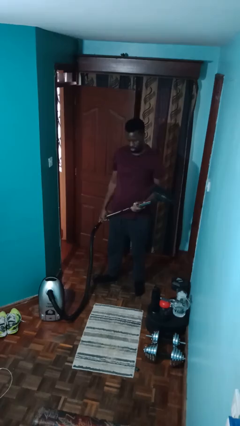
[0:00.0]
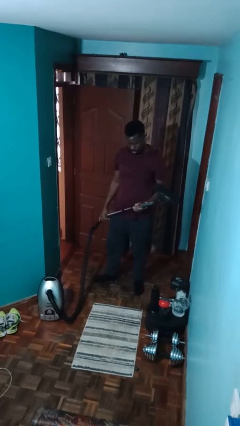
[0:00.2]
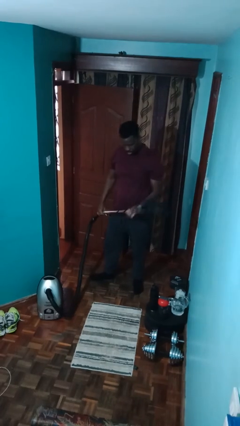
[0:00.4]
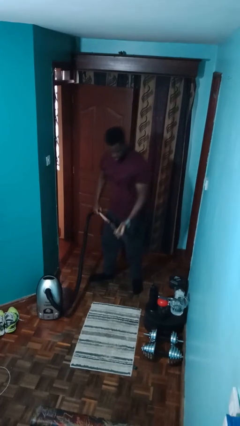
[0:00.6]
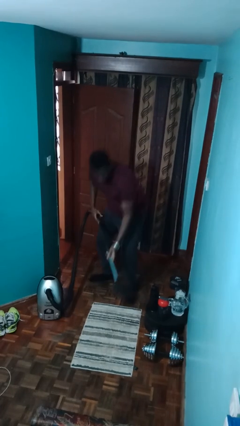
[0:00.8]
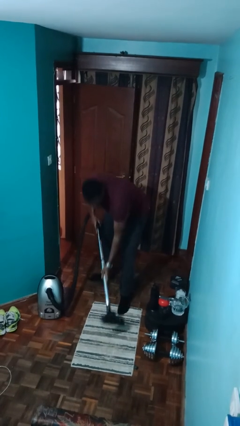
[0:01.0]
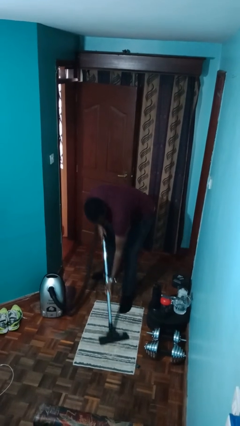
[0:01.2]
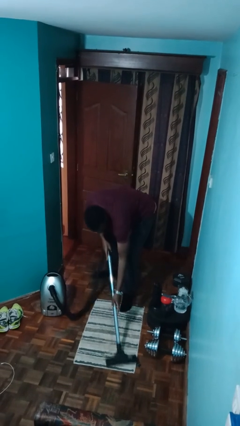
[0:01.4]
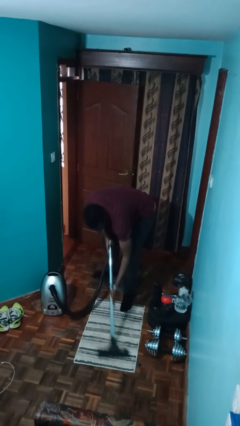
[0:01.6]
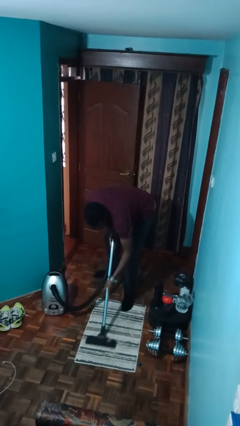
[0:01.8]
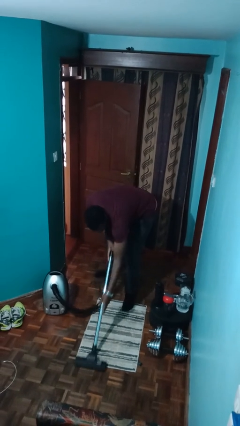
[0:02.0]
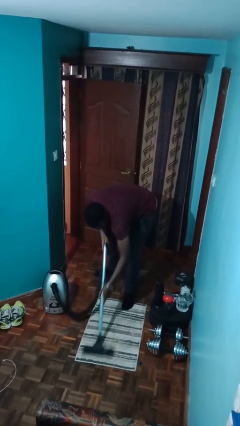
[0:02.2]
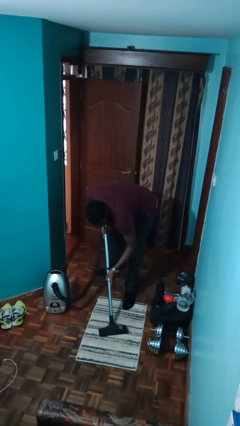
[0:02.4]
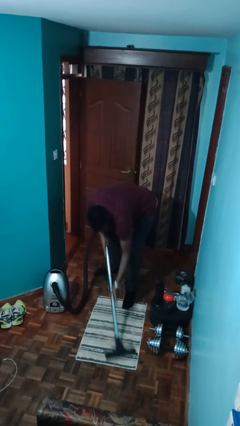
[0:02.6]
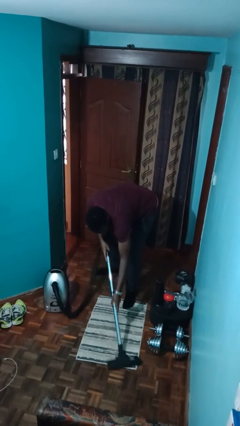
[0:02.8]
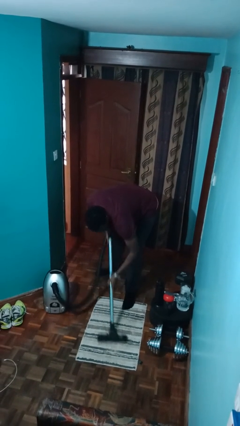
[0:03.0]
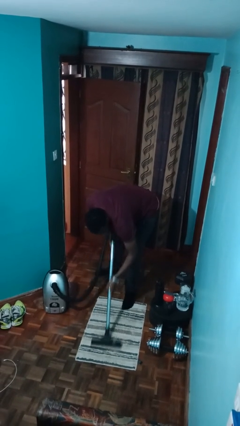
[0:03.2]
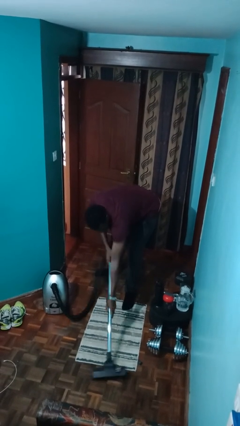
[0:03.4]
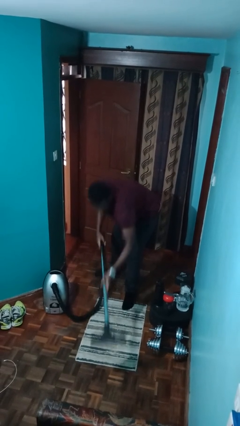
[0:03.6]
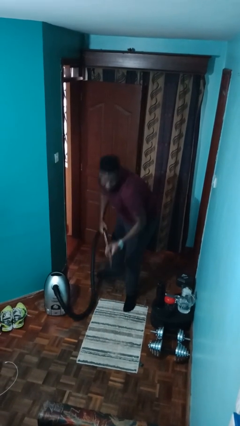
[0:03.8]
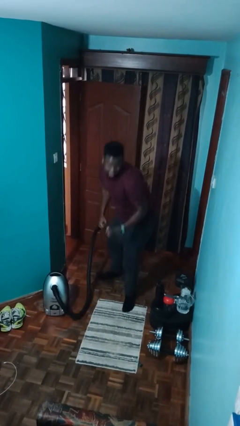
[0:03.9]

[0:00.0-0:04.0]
person vacuums carpet

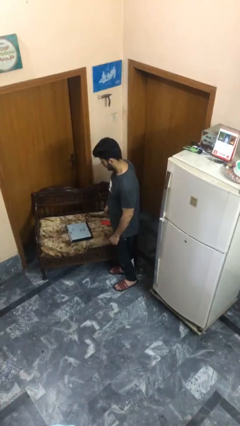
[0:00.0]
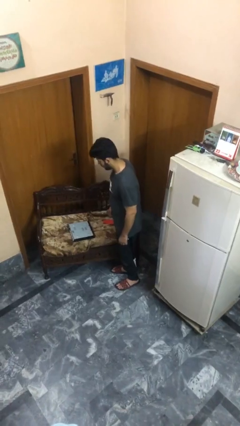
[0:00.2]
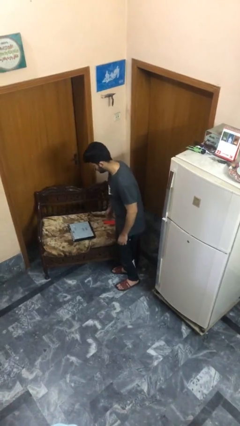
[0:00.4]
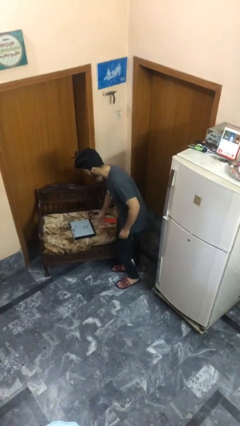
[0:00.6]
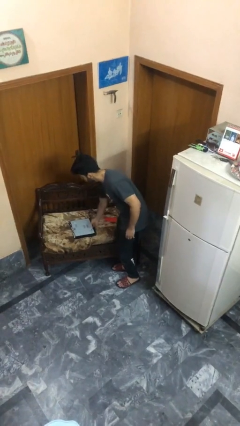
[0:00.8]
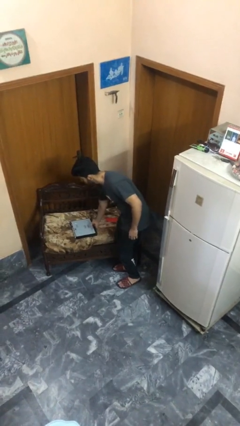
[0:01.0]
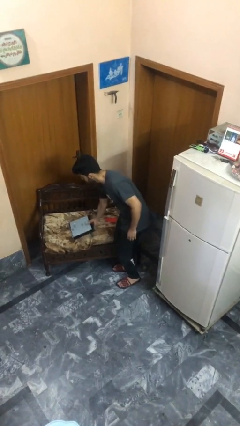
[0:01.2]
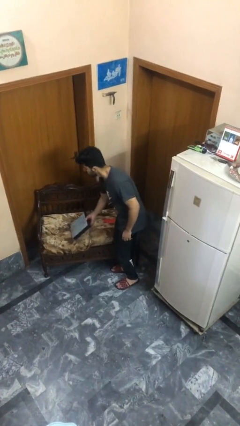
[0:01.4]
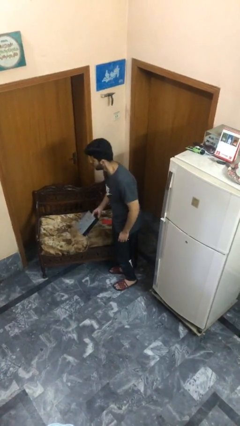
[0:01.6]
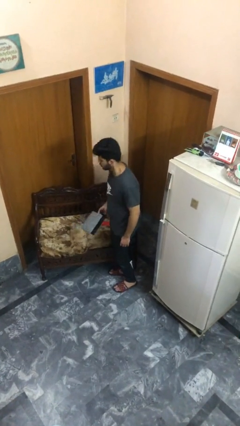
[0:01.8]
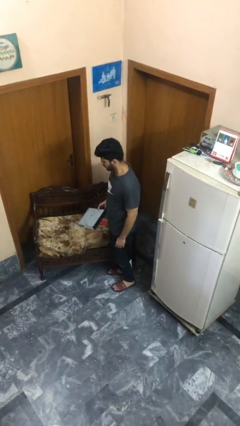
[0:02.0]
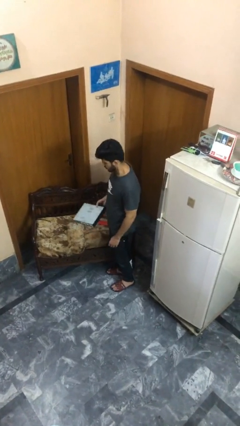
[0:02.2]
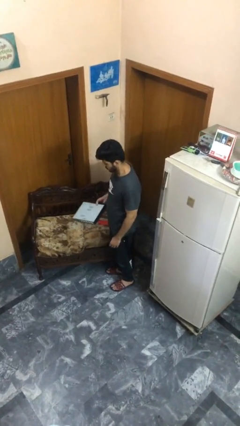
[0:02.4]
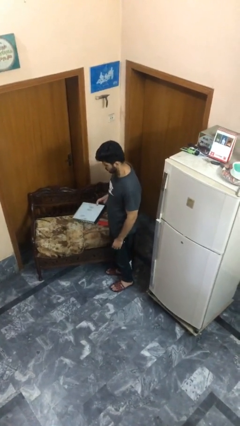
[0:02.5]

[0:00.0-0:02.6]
person picks up object from couch

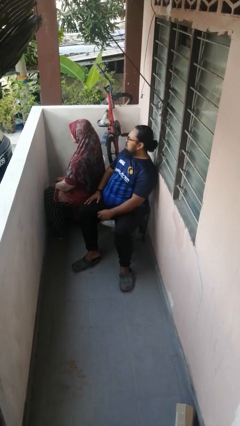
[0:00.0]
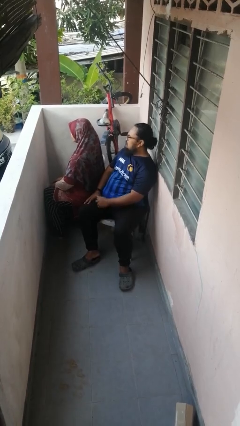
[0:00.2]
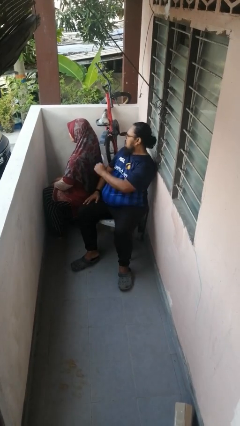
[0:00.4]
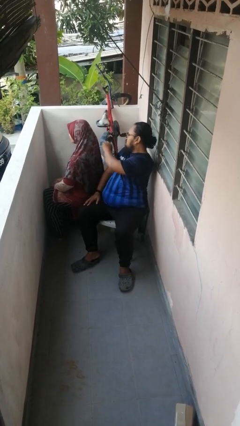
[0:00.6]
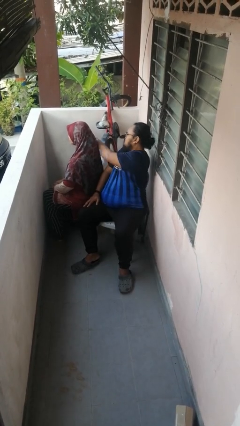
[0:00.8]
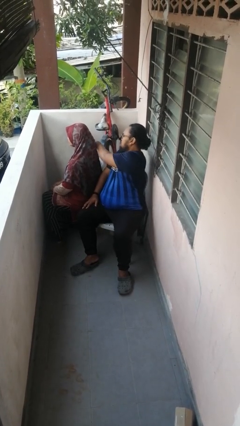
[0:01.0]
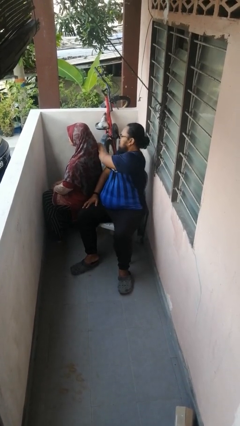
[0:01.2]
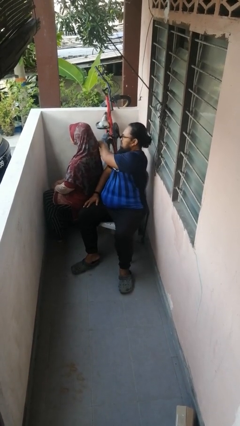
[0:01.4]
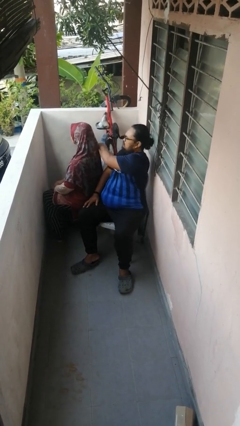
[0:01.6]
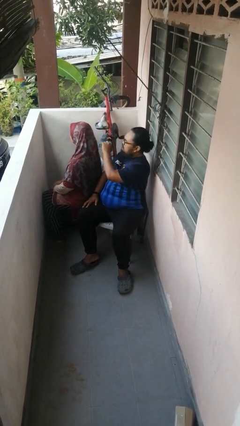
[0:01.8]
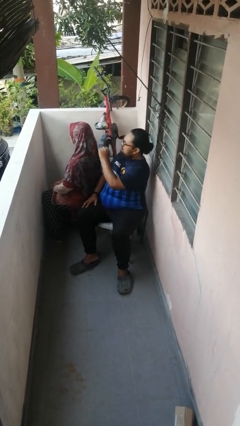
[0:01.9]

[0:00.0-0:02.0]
person touches back of person

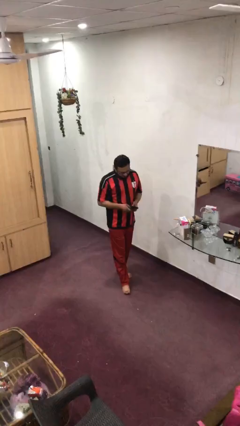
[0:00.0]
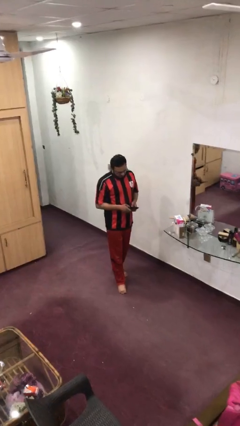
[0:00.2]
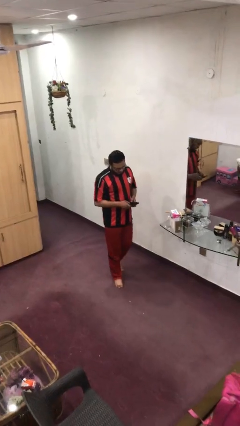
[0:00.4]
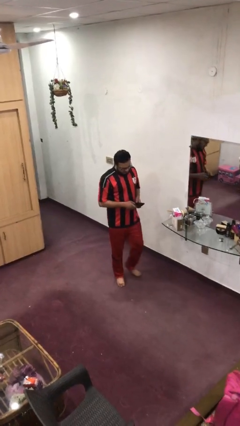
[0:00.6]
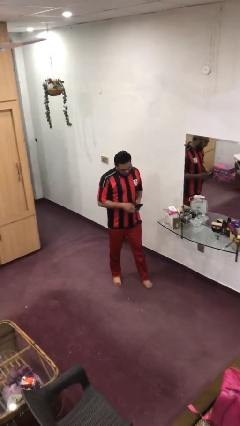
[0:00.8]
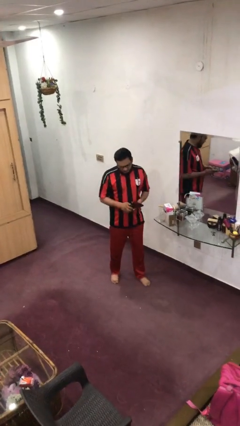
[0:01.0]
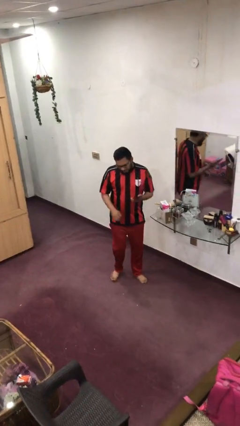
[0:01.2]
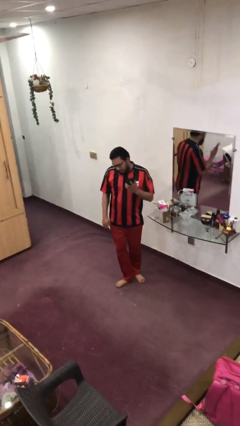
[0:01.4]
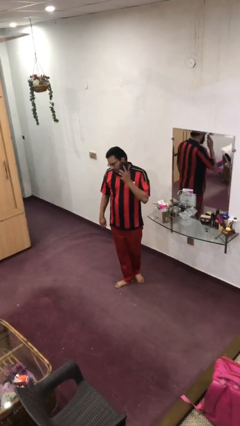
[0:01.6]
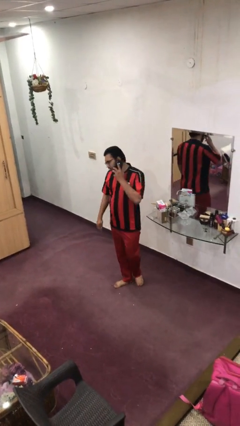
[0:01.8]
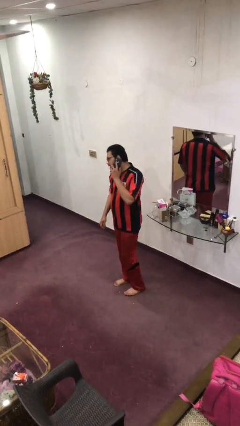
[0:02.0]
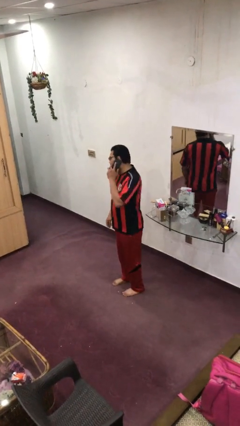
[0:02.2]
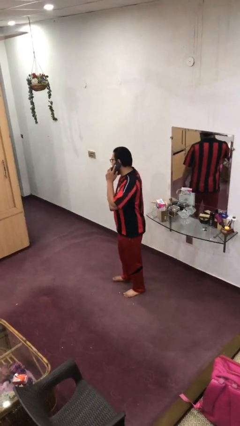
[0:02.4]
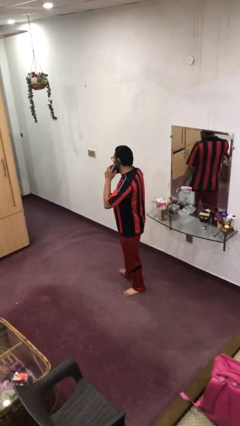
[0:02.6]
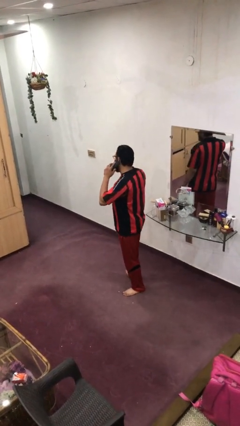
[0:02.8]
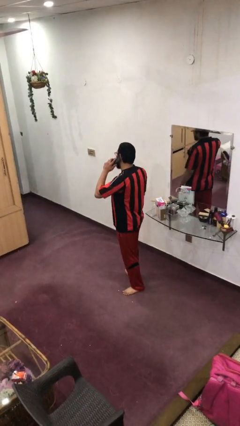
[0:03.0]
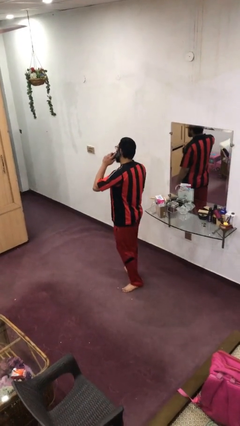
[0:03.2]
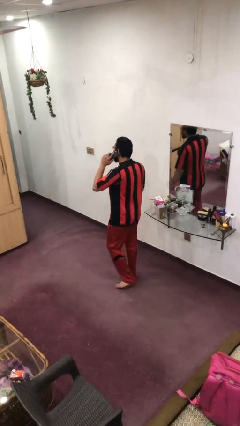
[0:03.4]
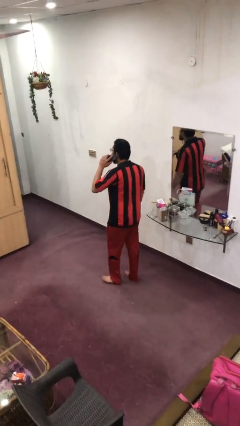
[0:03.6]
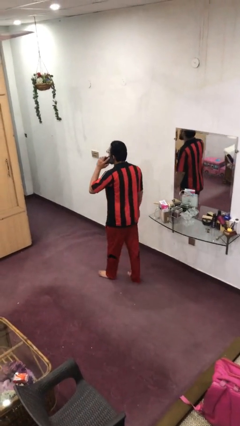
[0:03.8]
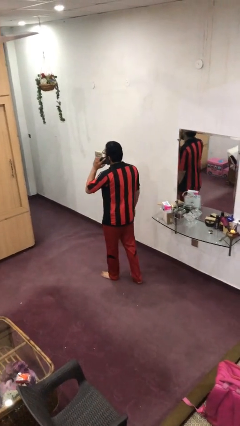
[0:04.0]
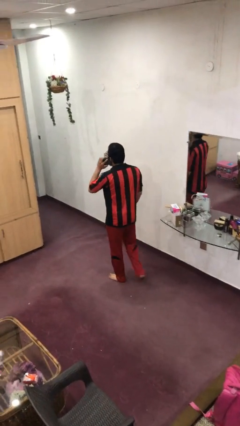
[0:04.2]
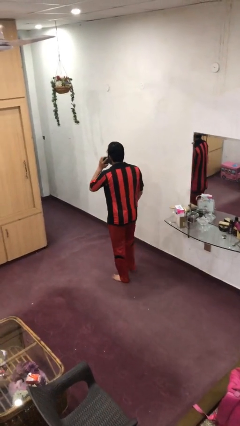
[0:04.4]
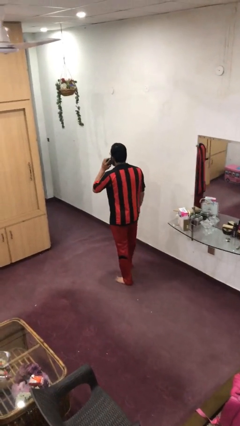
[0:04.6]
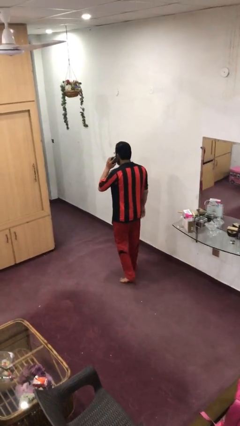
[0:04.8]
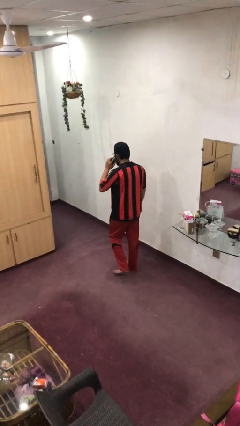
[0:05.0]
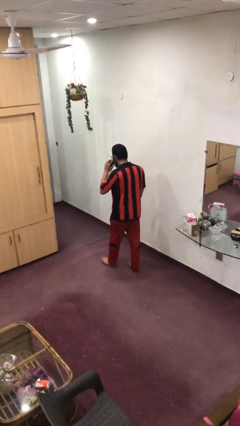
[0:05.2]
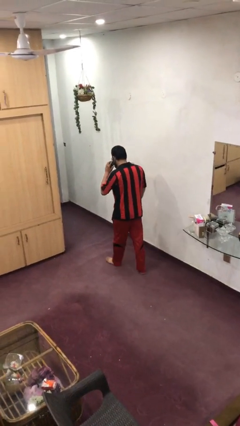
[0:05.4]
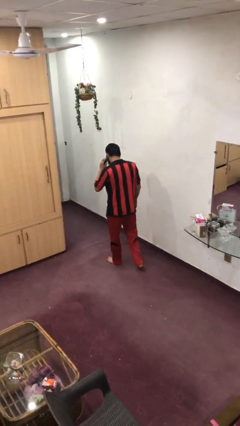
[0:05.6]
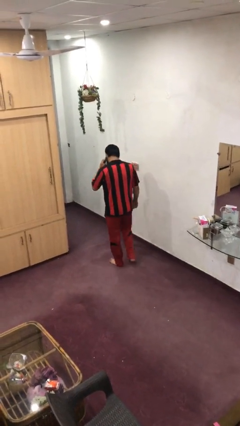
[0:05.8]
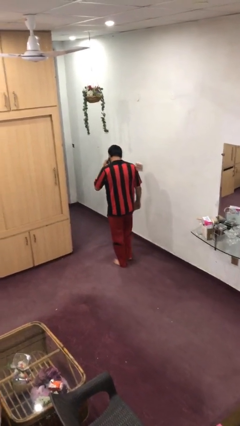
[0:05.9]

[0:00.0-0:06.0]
person talks on phone

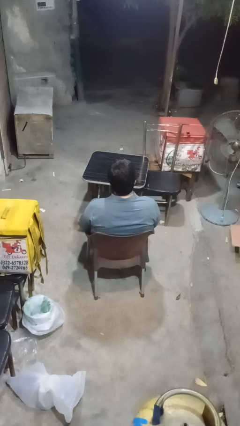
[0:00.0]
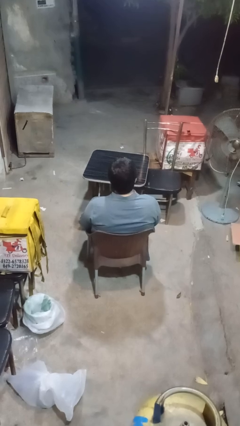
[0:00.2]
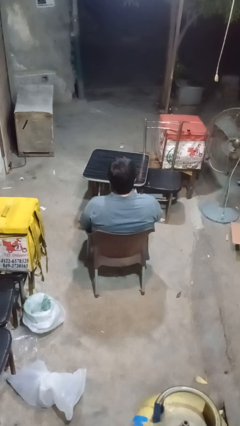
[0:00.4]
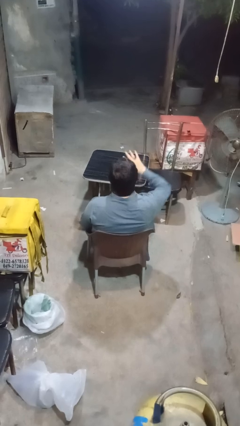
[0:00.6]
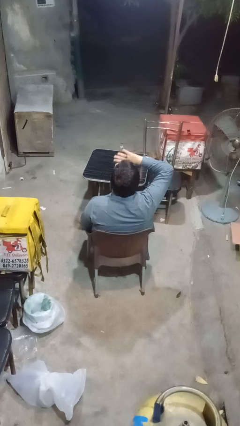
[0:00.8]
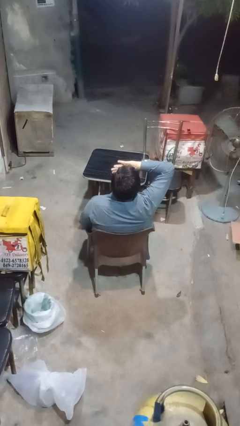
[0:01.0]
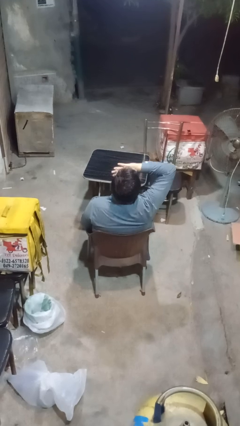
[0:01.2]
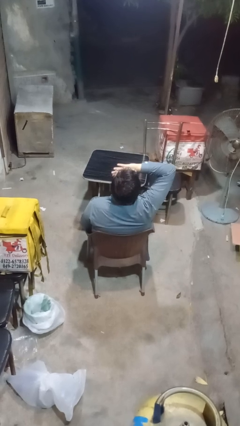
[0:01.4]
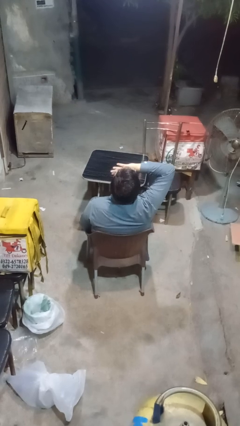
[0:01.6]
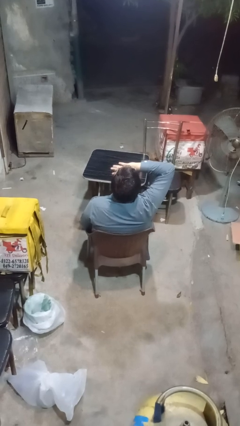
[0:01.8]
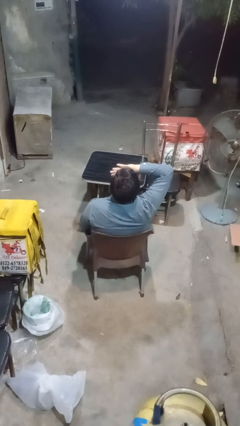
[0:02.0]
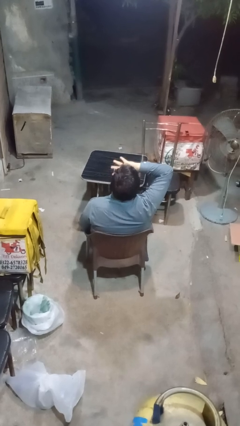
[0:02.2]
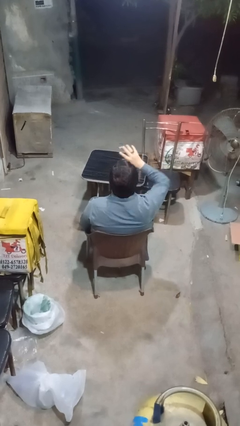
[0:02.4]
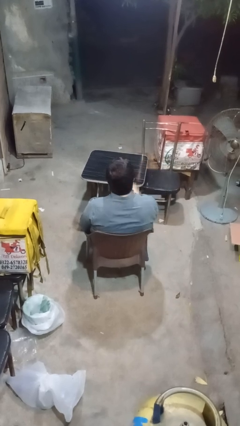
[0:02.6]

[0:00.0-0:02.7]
person yawns

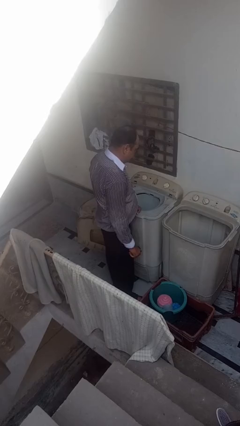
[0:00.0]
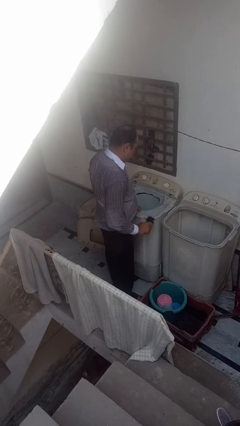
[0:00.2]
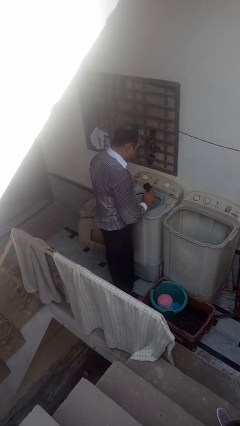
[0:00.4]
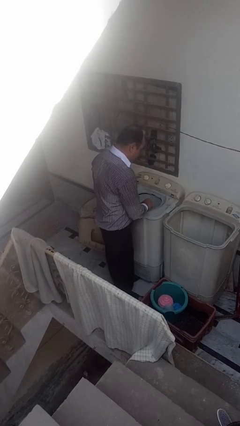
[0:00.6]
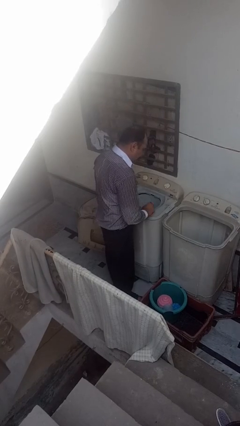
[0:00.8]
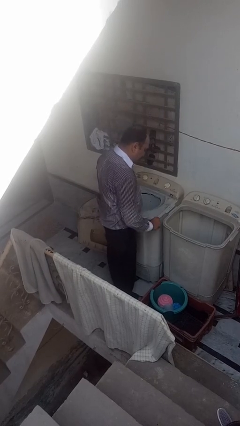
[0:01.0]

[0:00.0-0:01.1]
person loads dryer
